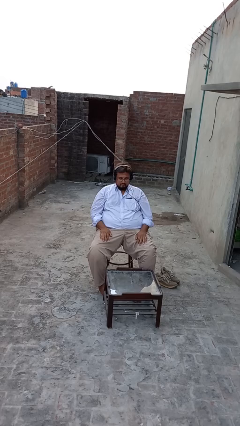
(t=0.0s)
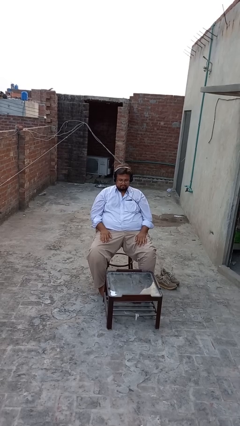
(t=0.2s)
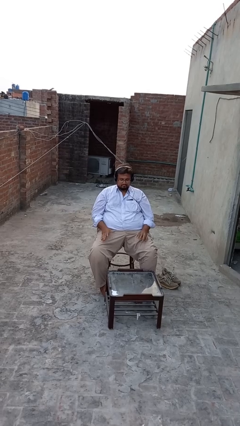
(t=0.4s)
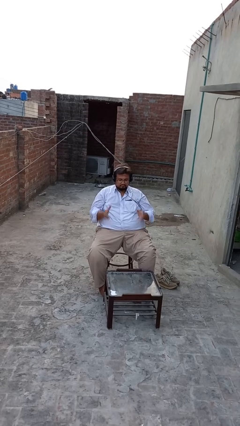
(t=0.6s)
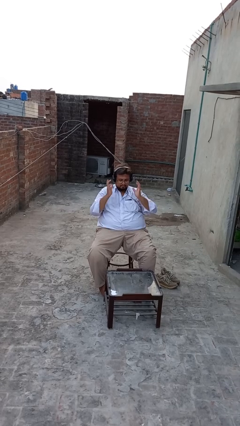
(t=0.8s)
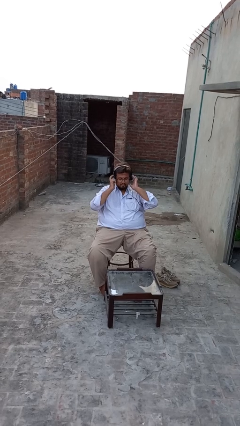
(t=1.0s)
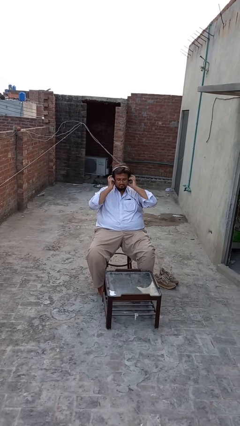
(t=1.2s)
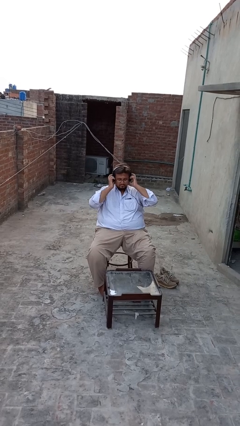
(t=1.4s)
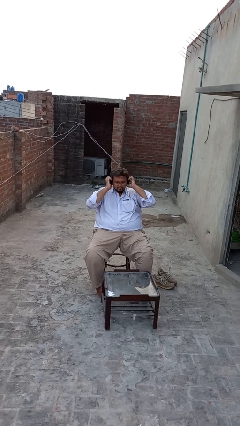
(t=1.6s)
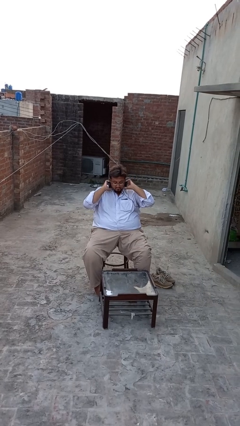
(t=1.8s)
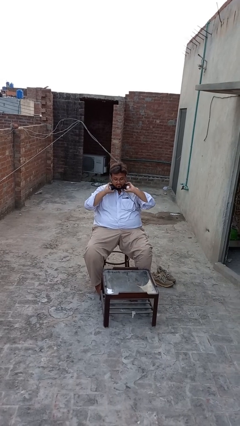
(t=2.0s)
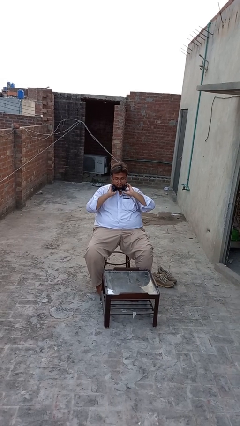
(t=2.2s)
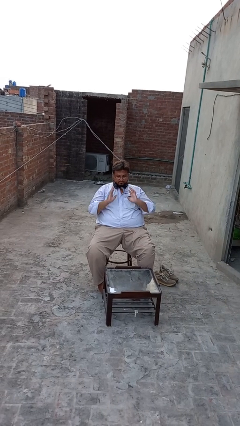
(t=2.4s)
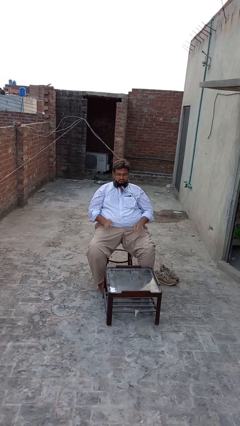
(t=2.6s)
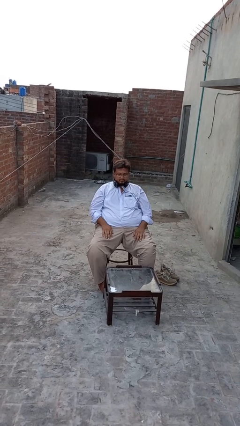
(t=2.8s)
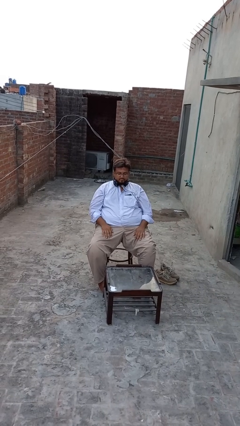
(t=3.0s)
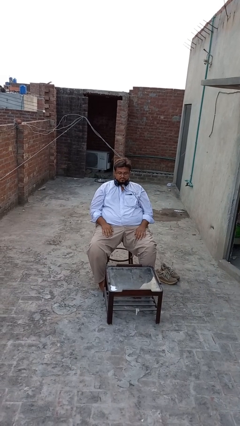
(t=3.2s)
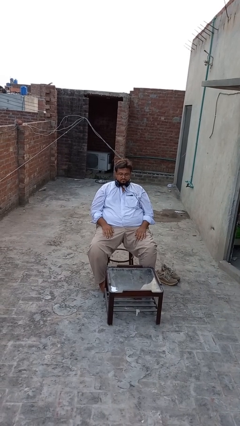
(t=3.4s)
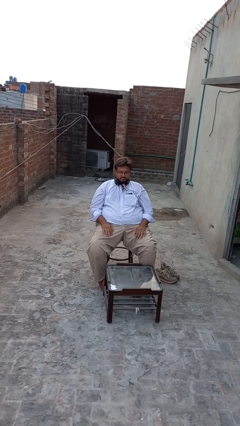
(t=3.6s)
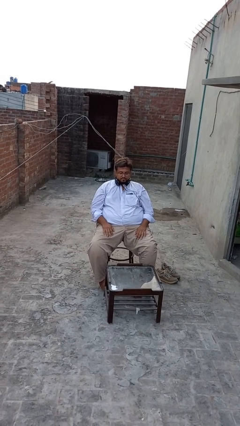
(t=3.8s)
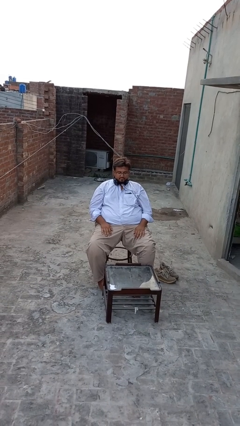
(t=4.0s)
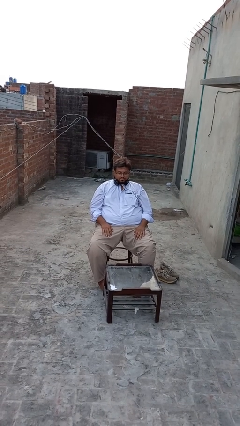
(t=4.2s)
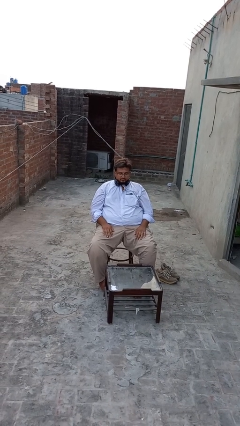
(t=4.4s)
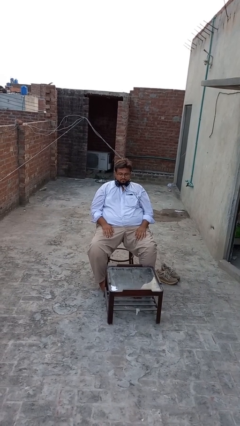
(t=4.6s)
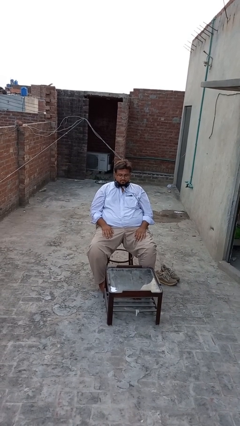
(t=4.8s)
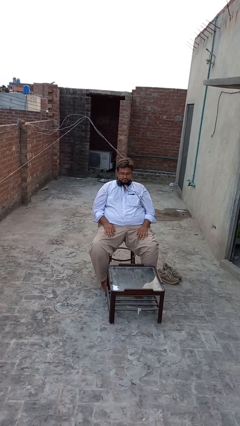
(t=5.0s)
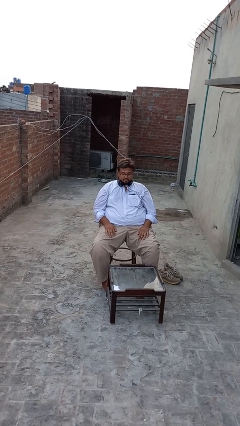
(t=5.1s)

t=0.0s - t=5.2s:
person takes off headphones

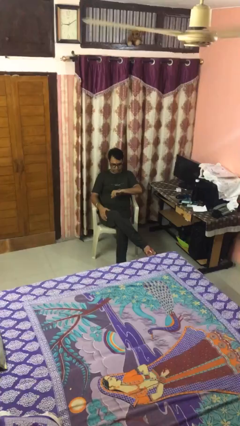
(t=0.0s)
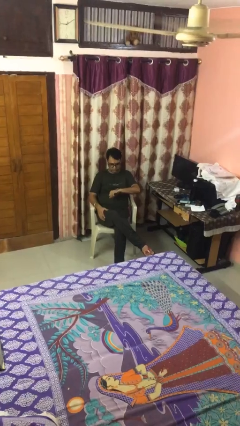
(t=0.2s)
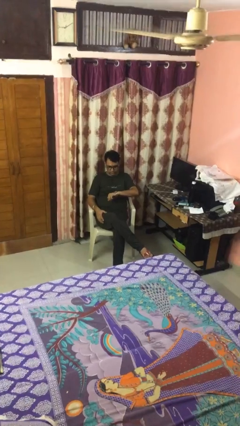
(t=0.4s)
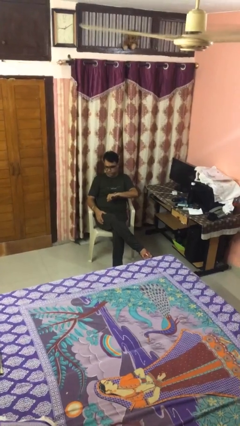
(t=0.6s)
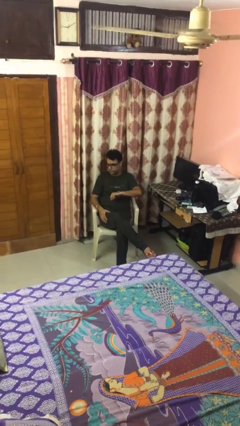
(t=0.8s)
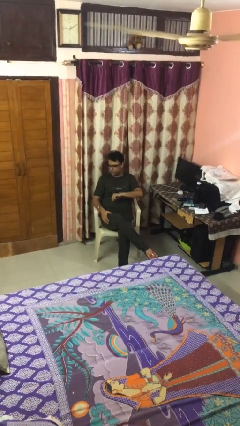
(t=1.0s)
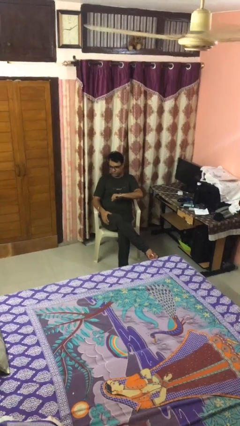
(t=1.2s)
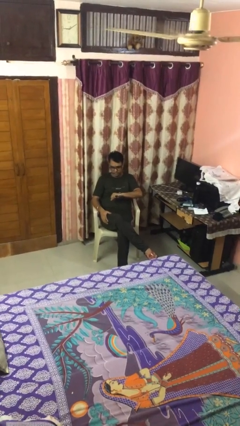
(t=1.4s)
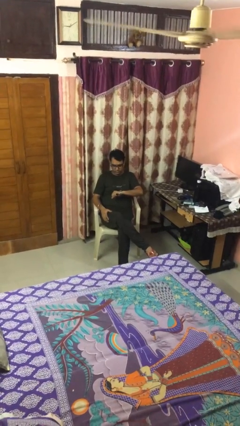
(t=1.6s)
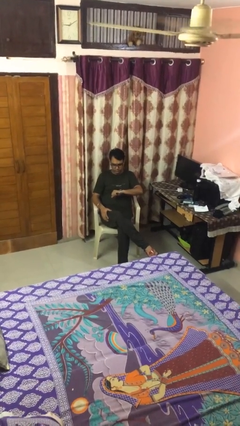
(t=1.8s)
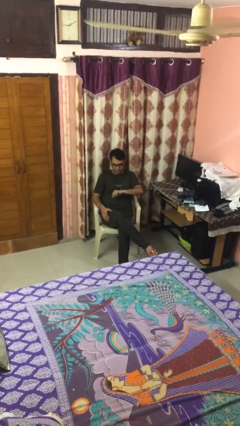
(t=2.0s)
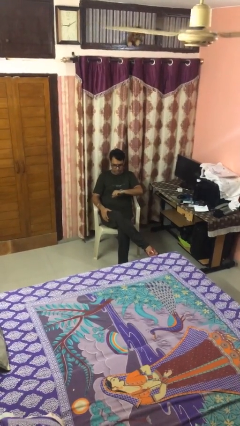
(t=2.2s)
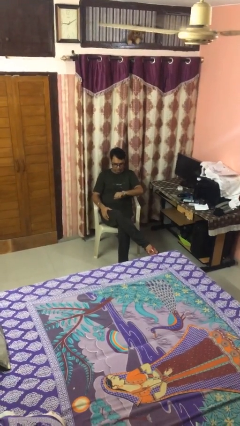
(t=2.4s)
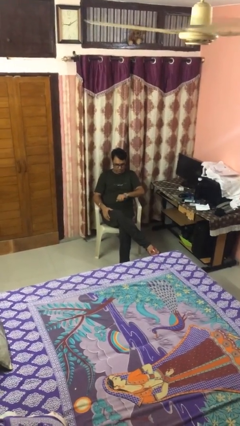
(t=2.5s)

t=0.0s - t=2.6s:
person looks at wristwatch

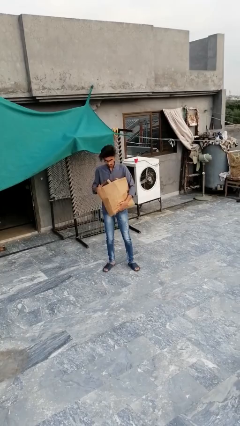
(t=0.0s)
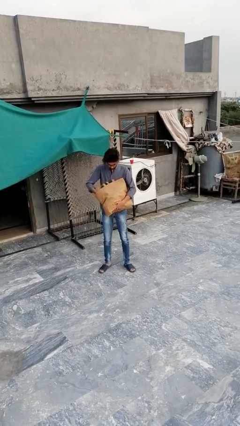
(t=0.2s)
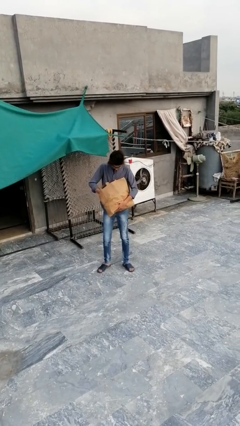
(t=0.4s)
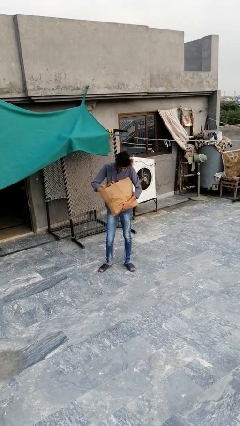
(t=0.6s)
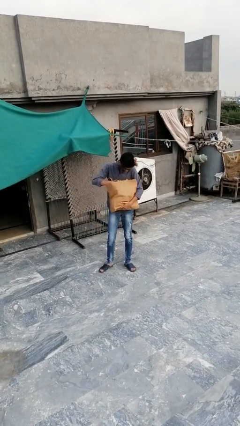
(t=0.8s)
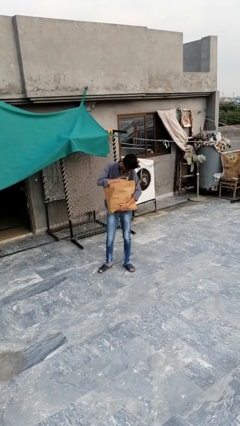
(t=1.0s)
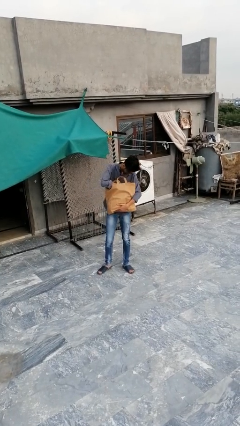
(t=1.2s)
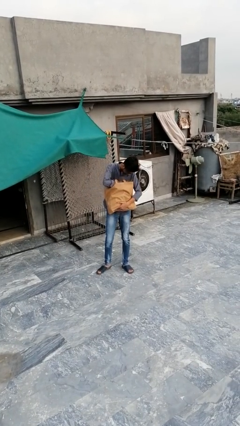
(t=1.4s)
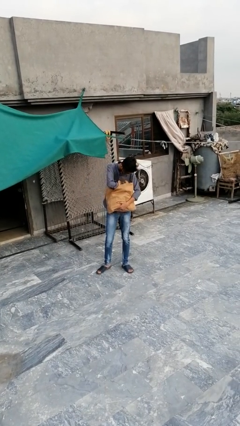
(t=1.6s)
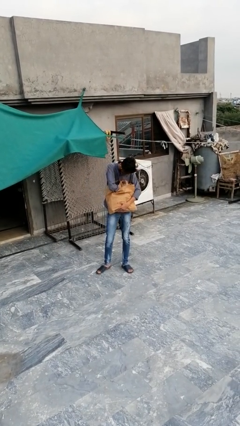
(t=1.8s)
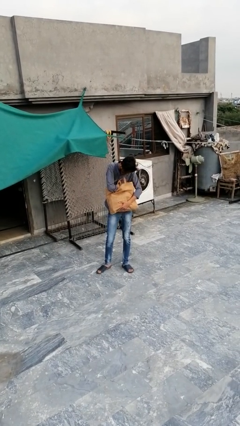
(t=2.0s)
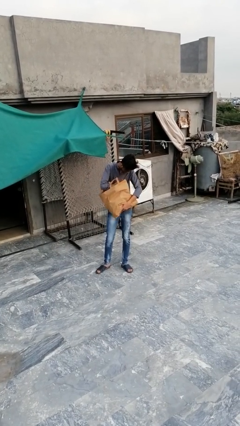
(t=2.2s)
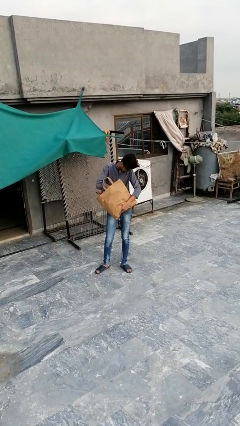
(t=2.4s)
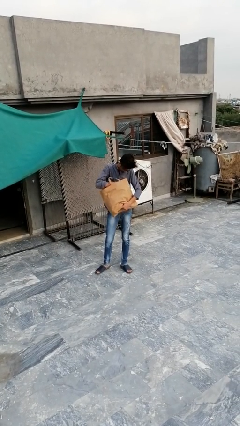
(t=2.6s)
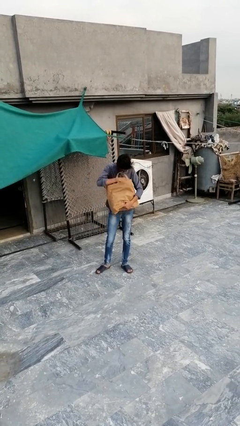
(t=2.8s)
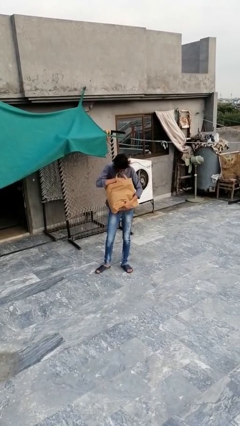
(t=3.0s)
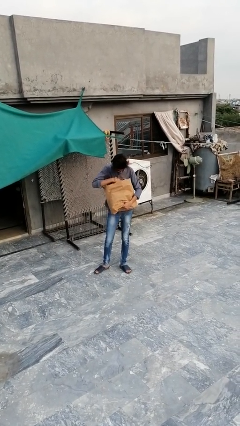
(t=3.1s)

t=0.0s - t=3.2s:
person searches in bag

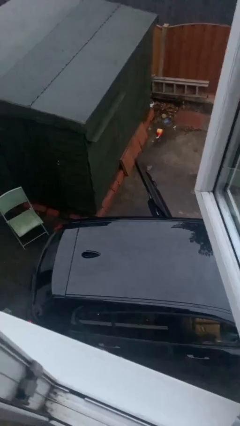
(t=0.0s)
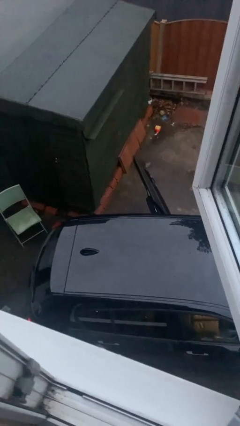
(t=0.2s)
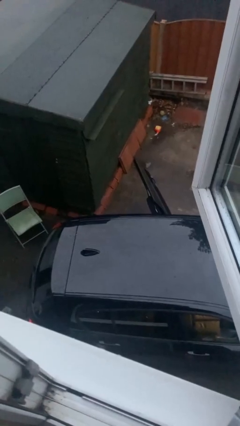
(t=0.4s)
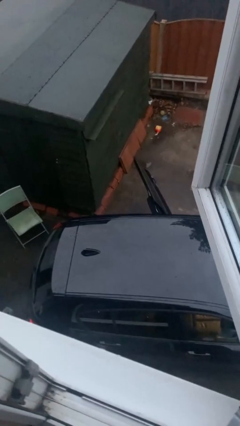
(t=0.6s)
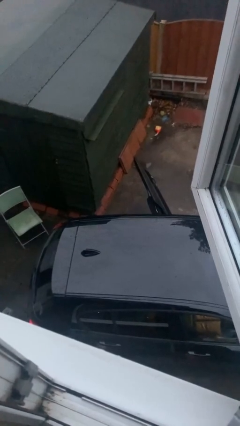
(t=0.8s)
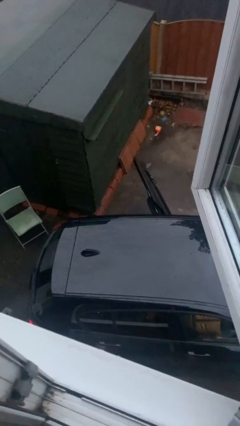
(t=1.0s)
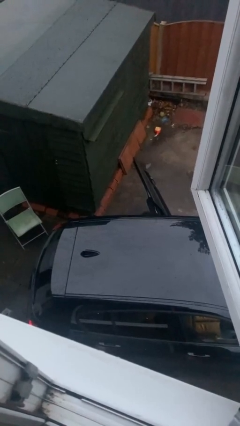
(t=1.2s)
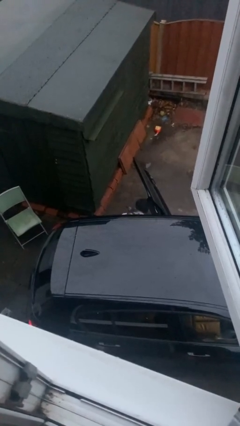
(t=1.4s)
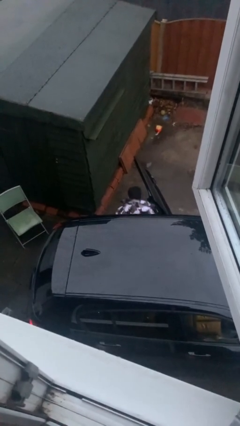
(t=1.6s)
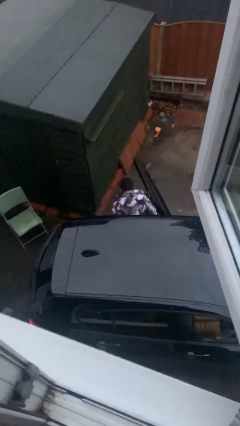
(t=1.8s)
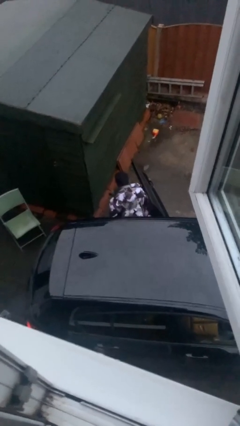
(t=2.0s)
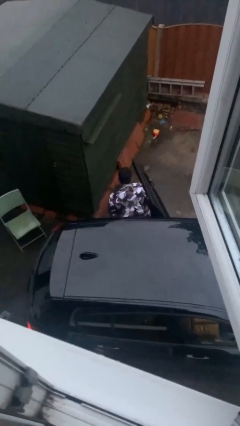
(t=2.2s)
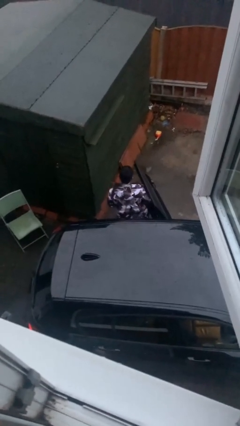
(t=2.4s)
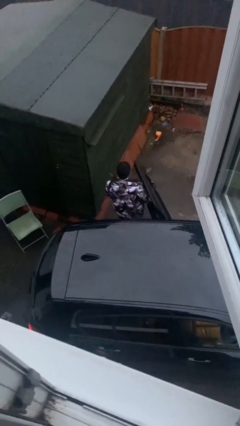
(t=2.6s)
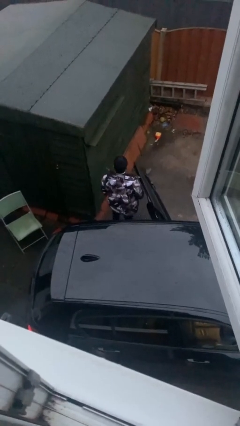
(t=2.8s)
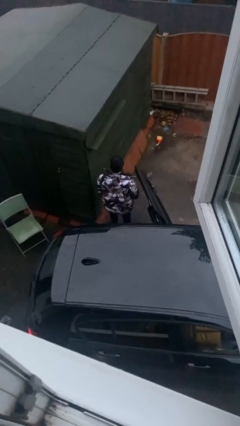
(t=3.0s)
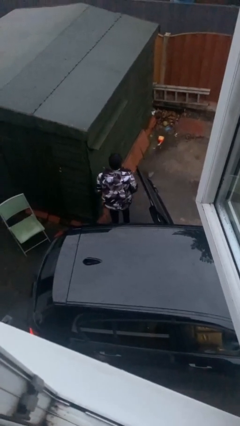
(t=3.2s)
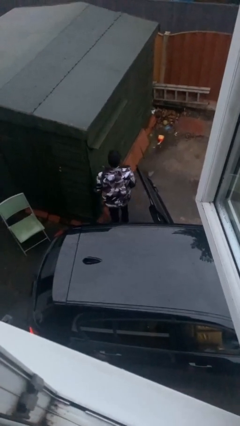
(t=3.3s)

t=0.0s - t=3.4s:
person exits car

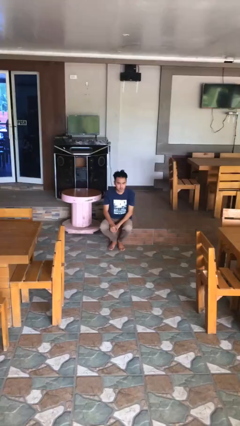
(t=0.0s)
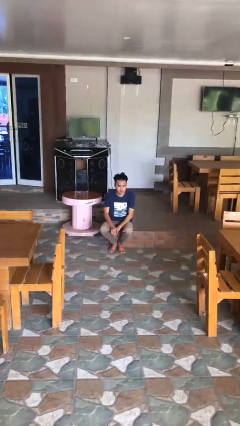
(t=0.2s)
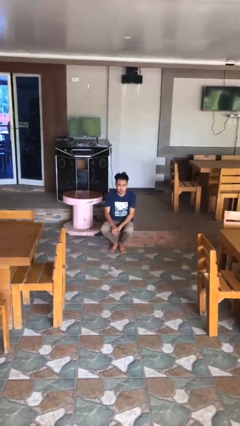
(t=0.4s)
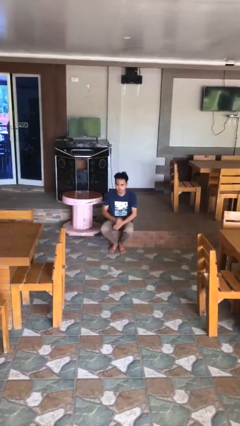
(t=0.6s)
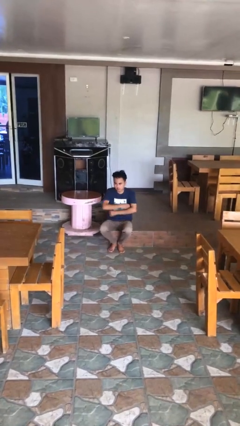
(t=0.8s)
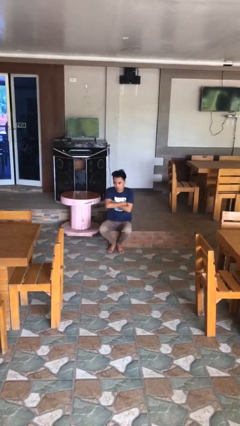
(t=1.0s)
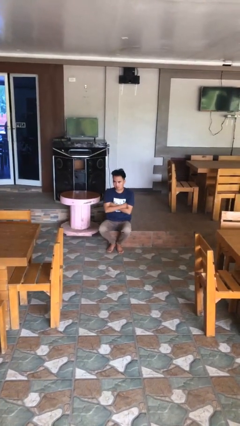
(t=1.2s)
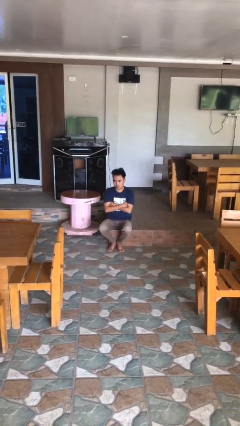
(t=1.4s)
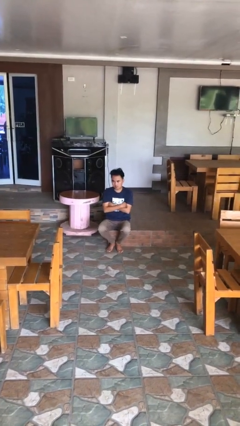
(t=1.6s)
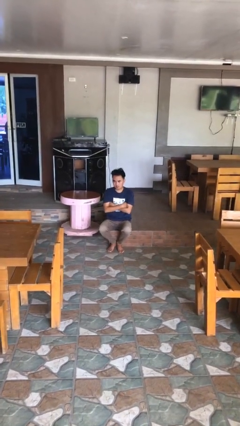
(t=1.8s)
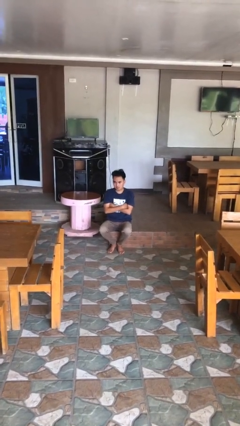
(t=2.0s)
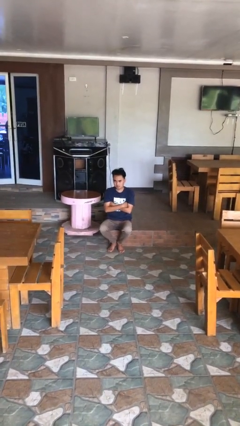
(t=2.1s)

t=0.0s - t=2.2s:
person crosses arms

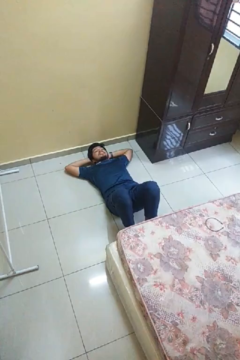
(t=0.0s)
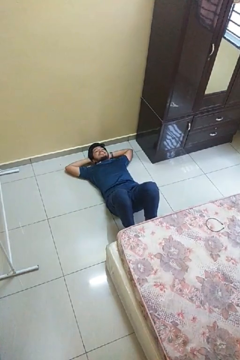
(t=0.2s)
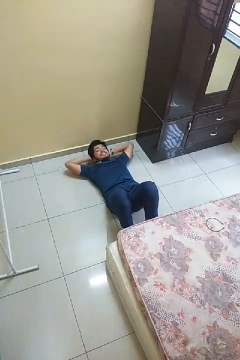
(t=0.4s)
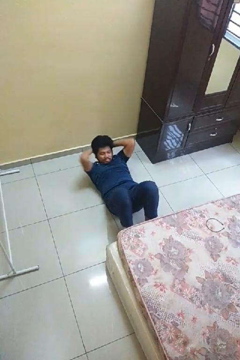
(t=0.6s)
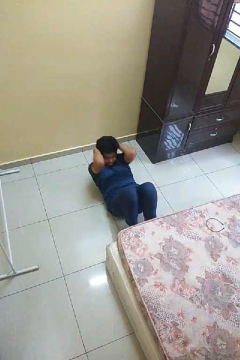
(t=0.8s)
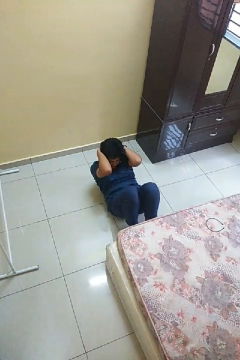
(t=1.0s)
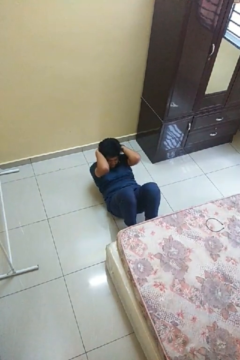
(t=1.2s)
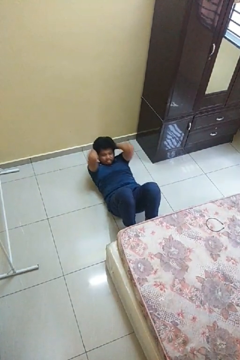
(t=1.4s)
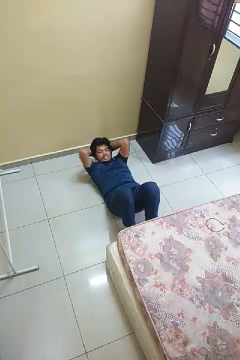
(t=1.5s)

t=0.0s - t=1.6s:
person exercises with situp
